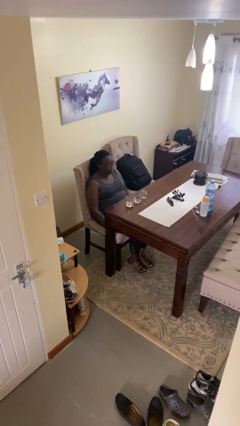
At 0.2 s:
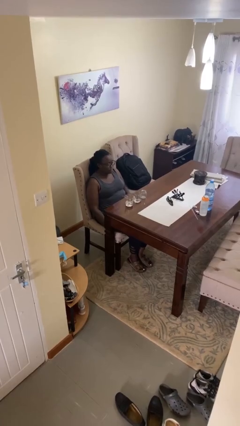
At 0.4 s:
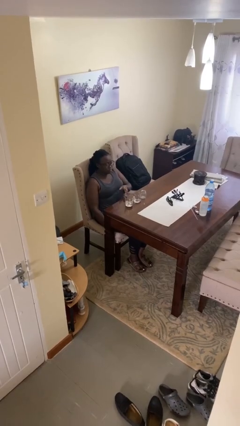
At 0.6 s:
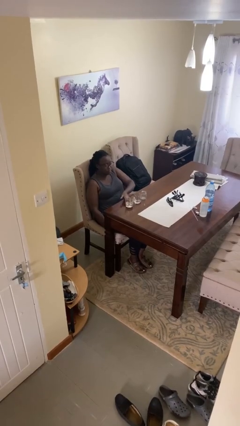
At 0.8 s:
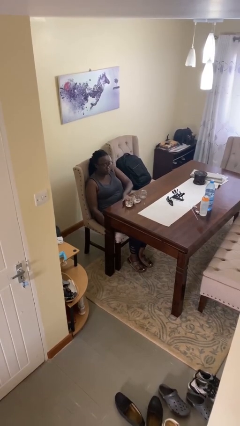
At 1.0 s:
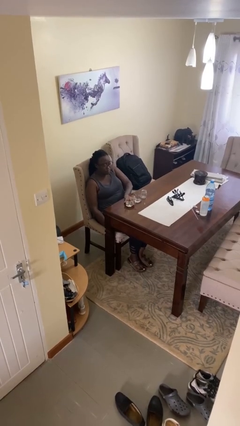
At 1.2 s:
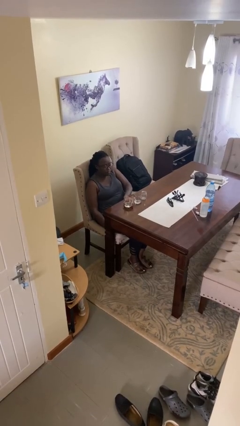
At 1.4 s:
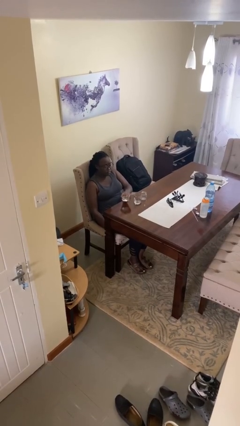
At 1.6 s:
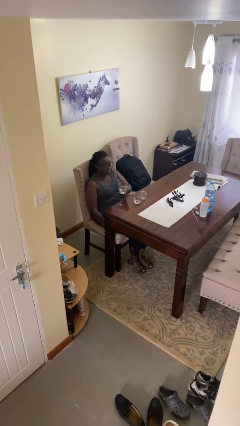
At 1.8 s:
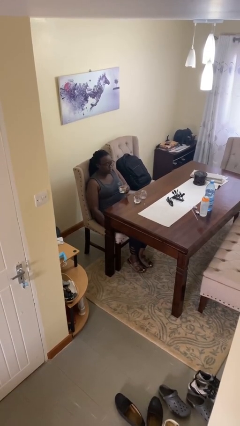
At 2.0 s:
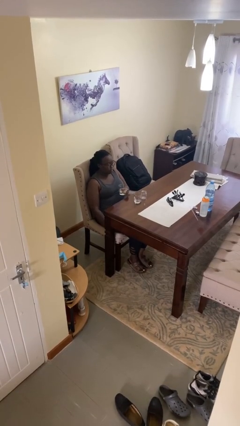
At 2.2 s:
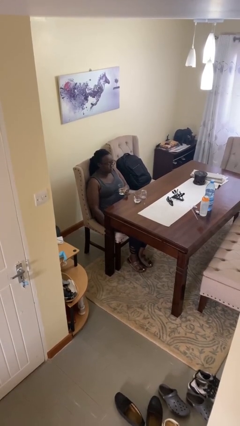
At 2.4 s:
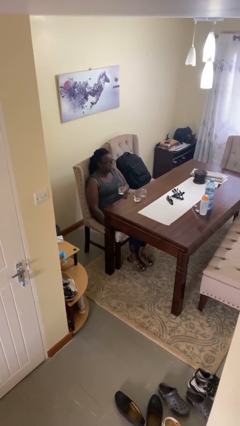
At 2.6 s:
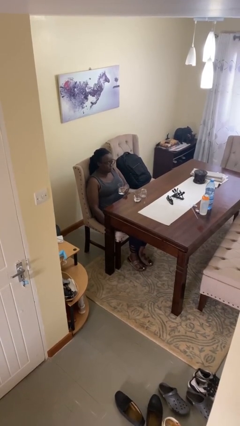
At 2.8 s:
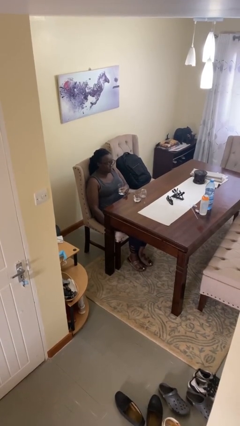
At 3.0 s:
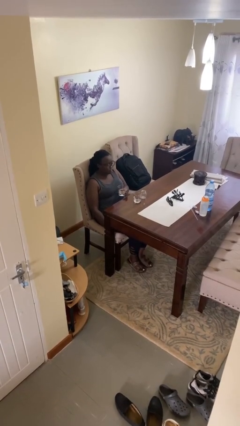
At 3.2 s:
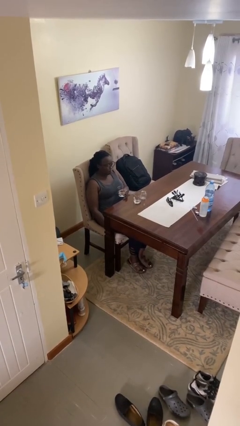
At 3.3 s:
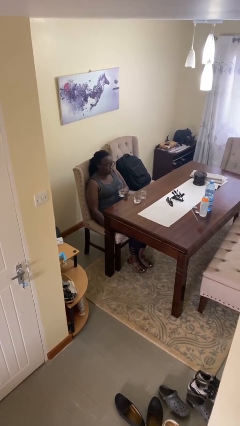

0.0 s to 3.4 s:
person picks up object from table

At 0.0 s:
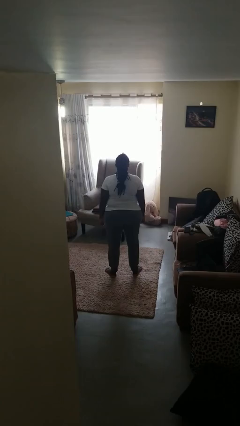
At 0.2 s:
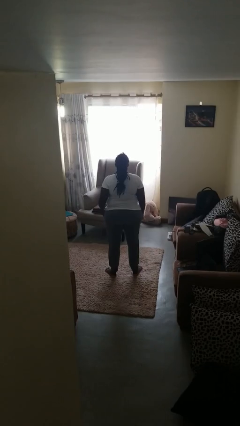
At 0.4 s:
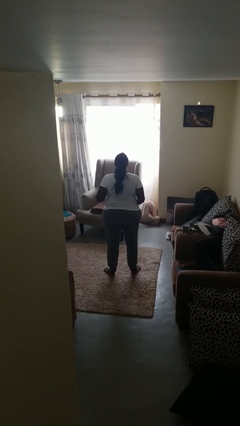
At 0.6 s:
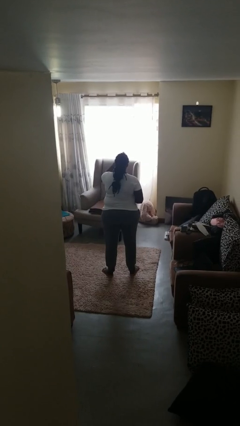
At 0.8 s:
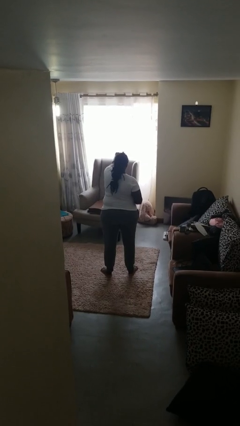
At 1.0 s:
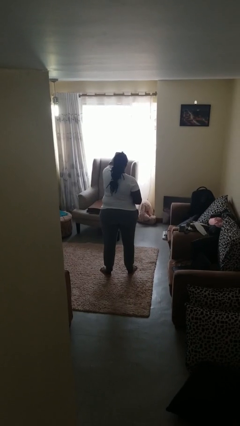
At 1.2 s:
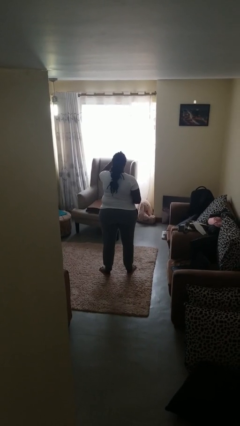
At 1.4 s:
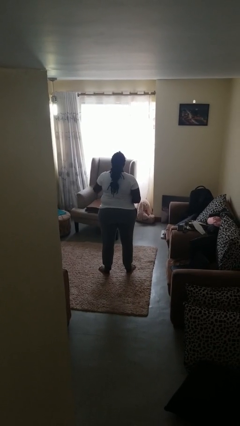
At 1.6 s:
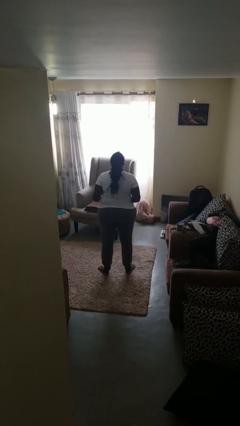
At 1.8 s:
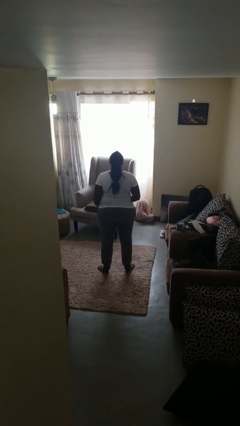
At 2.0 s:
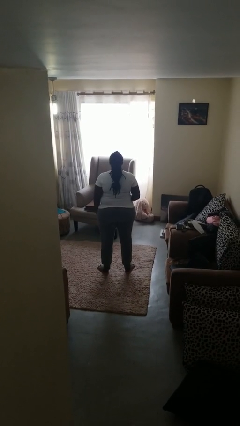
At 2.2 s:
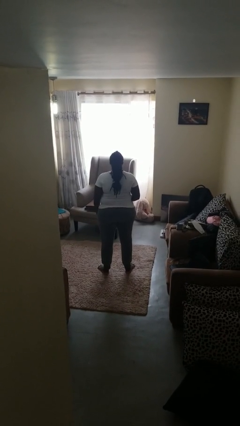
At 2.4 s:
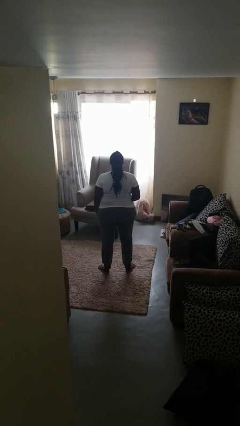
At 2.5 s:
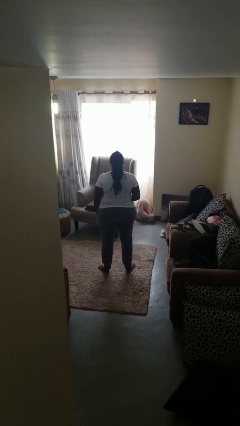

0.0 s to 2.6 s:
person punches

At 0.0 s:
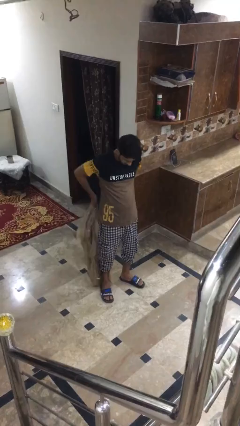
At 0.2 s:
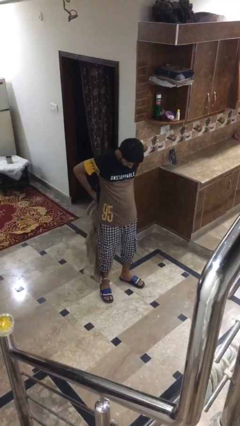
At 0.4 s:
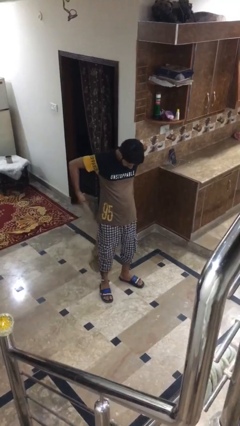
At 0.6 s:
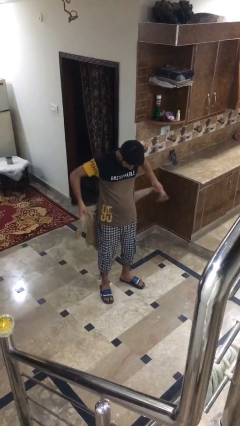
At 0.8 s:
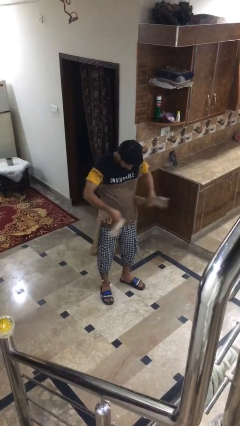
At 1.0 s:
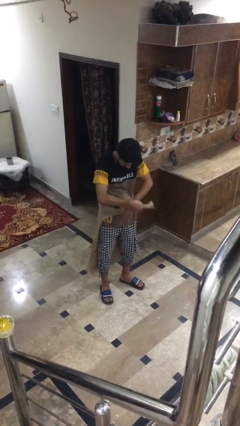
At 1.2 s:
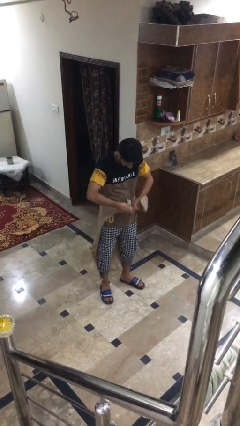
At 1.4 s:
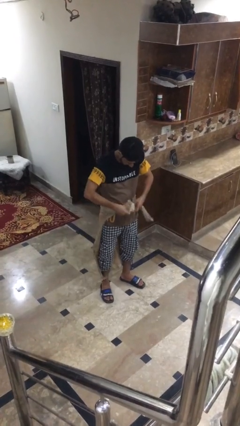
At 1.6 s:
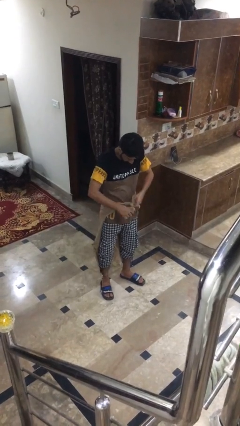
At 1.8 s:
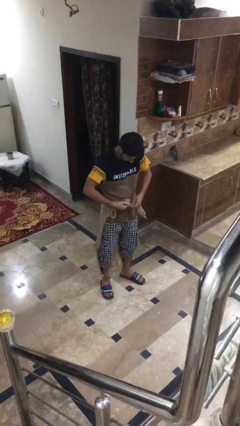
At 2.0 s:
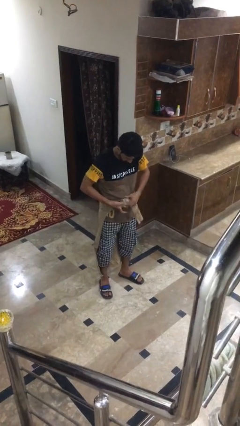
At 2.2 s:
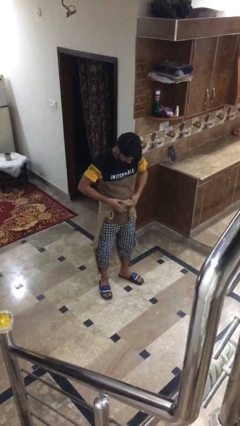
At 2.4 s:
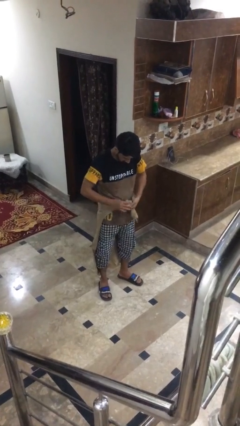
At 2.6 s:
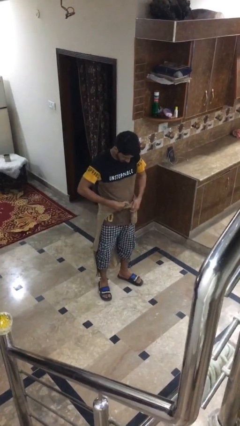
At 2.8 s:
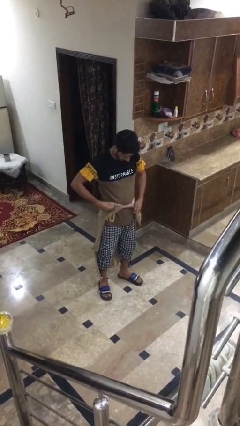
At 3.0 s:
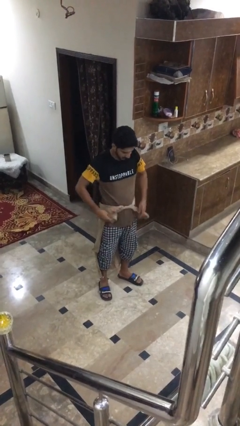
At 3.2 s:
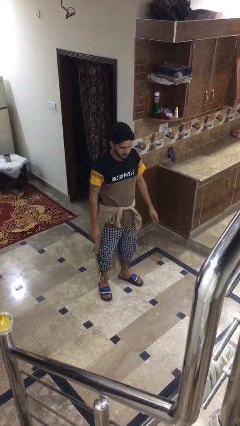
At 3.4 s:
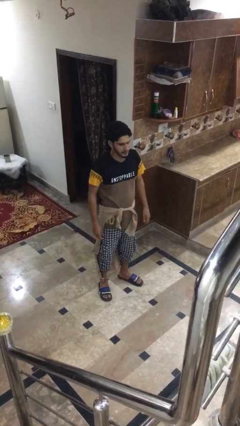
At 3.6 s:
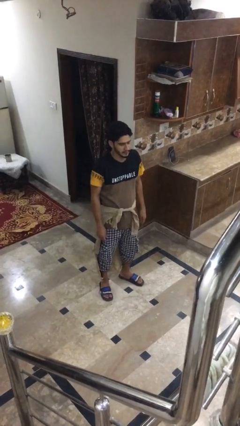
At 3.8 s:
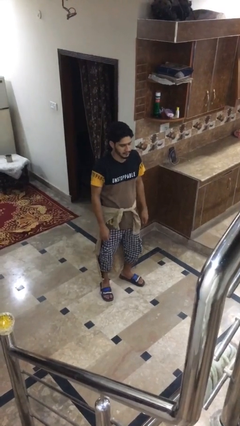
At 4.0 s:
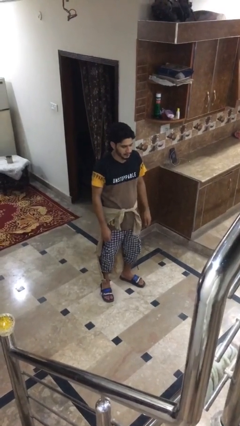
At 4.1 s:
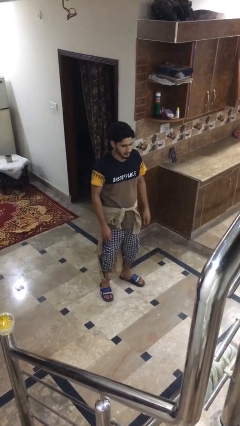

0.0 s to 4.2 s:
person ties jacket around waist

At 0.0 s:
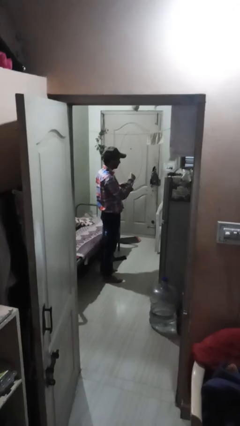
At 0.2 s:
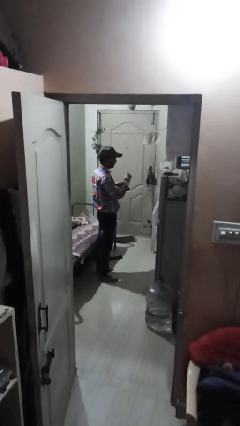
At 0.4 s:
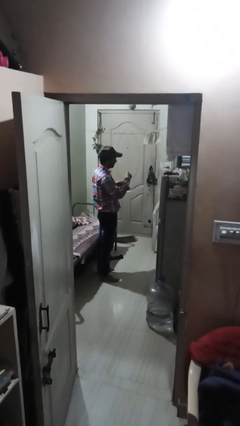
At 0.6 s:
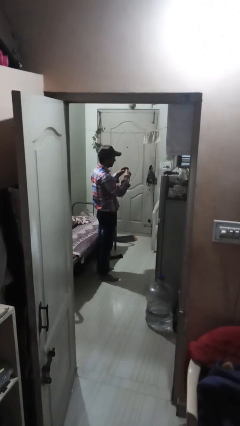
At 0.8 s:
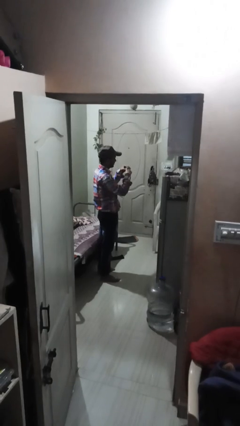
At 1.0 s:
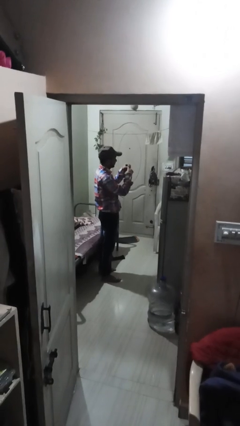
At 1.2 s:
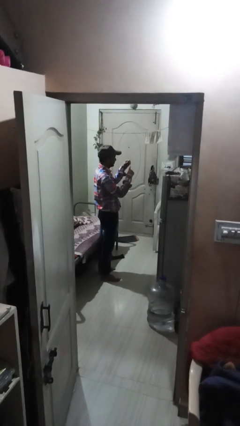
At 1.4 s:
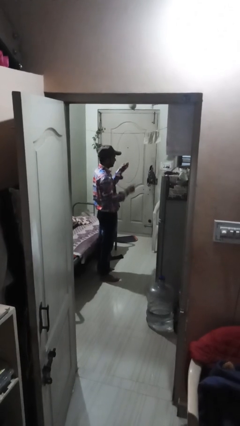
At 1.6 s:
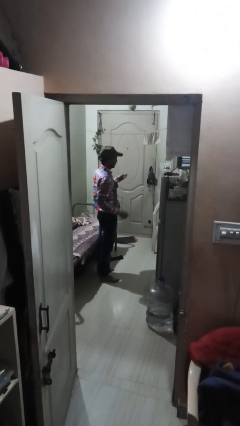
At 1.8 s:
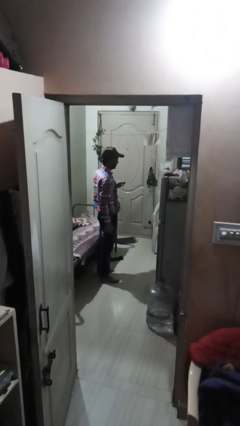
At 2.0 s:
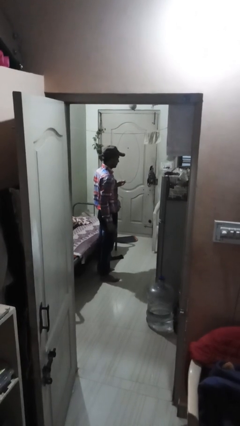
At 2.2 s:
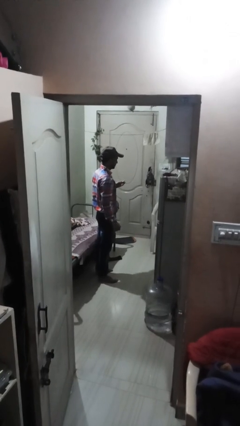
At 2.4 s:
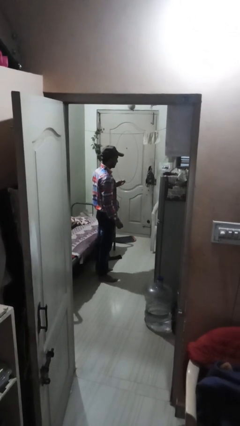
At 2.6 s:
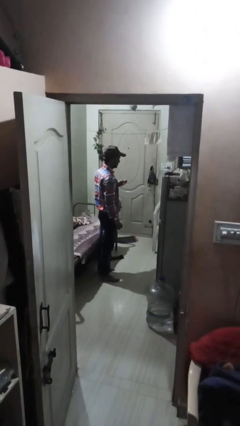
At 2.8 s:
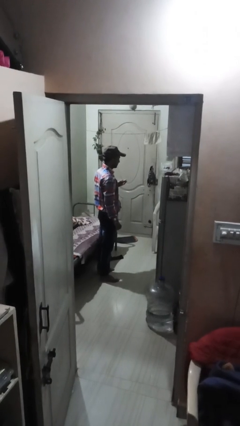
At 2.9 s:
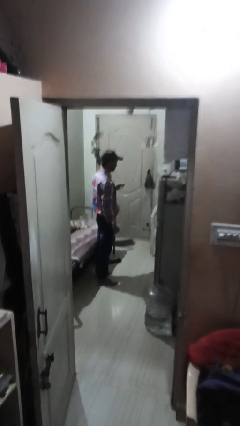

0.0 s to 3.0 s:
person takes off ring

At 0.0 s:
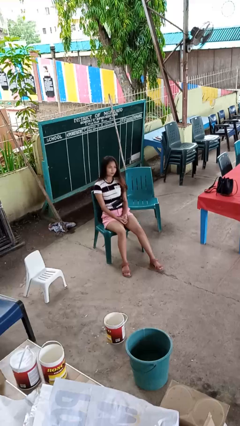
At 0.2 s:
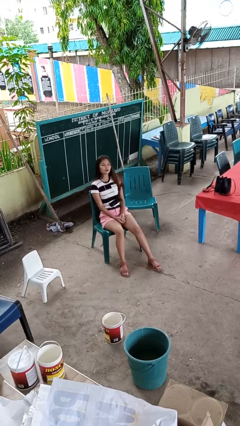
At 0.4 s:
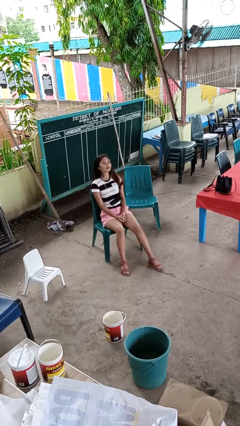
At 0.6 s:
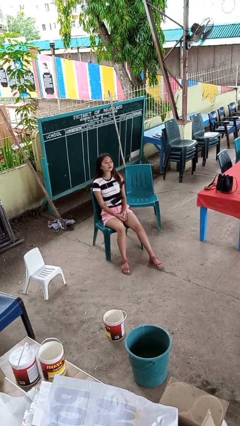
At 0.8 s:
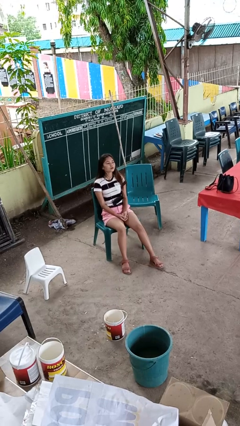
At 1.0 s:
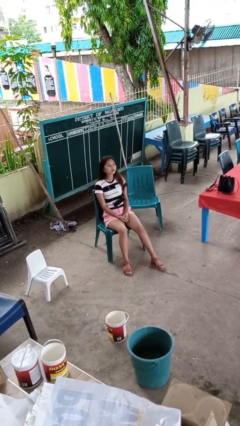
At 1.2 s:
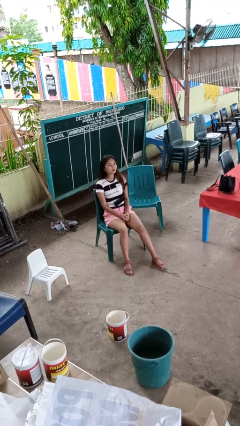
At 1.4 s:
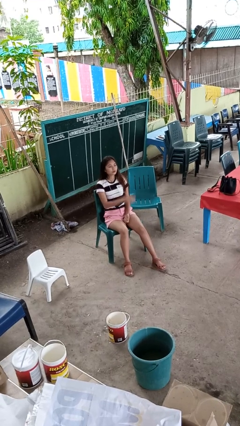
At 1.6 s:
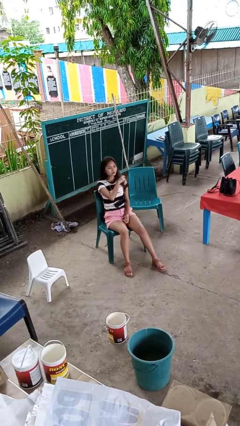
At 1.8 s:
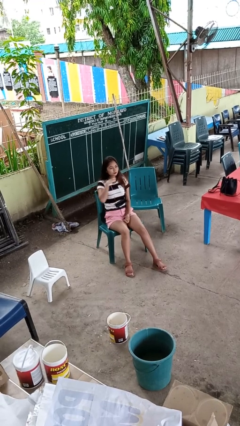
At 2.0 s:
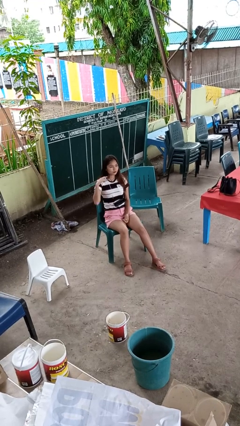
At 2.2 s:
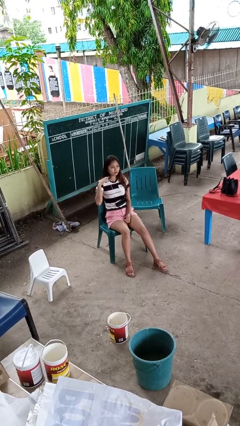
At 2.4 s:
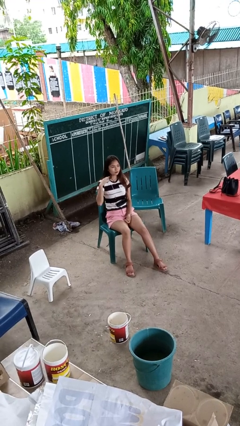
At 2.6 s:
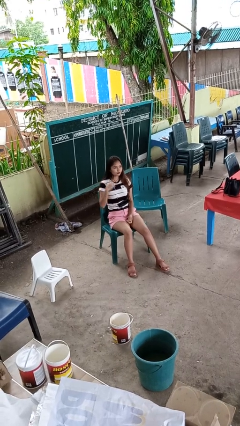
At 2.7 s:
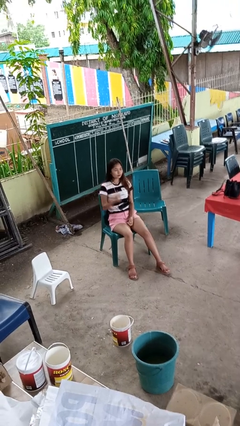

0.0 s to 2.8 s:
person gestures cut

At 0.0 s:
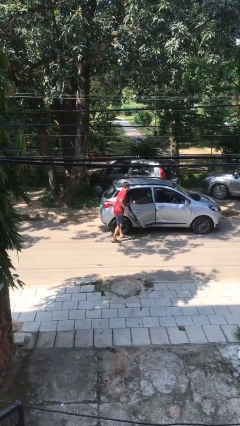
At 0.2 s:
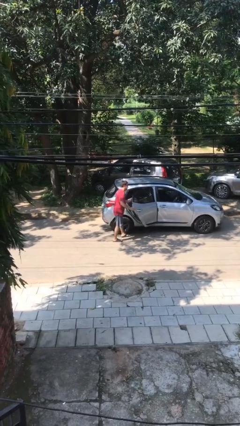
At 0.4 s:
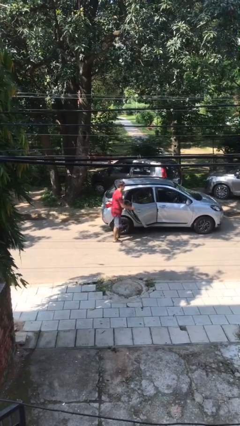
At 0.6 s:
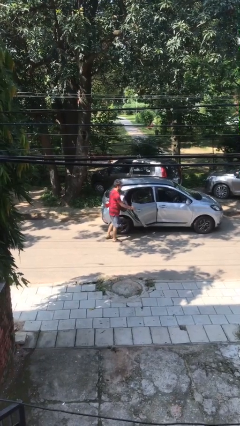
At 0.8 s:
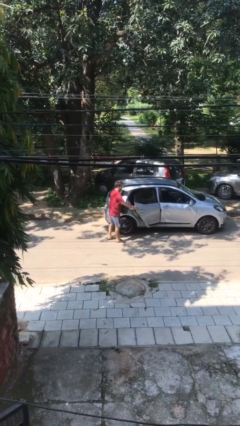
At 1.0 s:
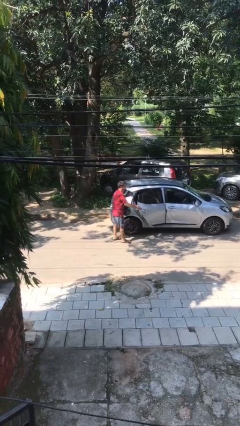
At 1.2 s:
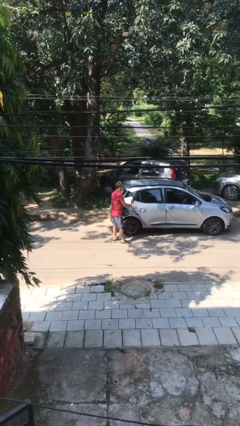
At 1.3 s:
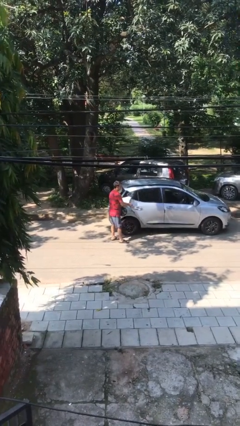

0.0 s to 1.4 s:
person unloads car
